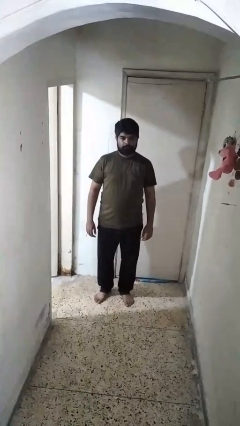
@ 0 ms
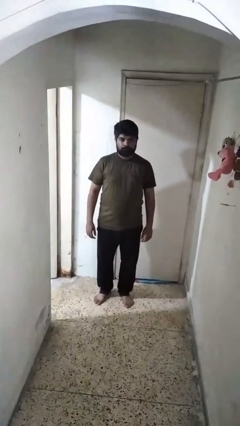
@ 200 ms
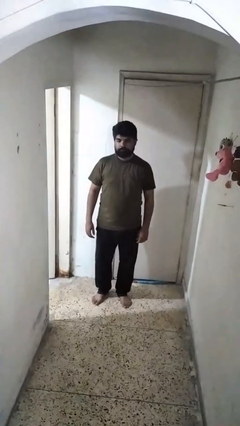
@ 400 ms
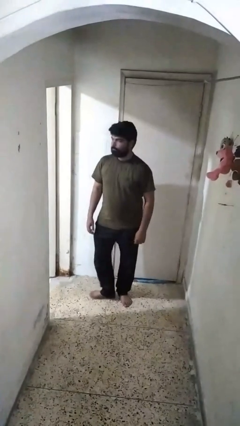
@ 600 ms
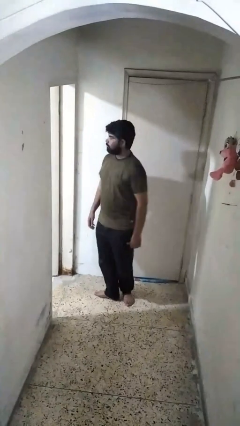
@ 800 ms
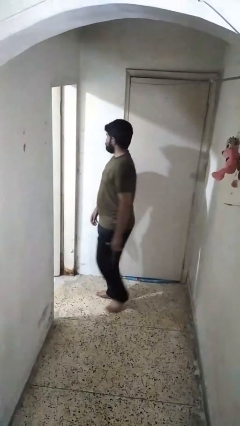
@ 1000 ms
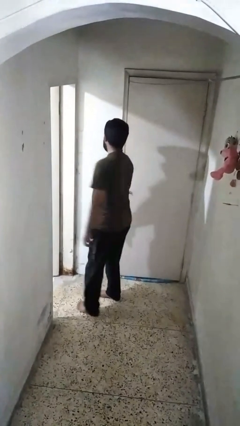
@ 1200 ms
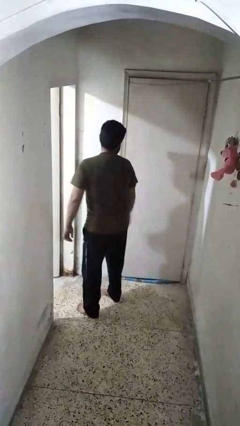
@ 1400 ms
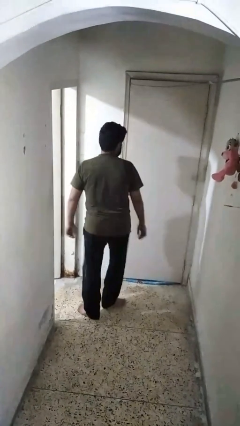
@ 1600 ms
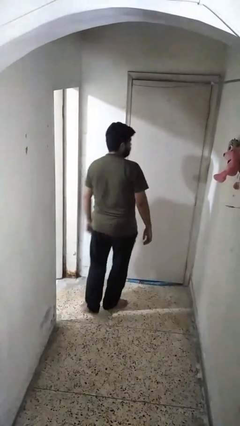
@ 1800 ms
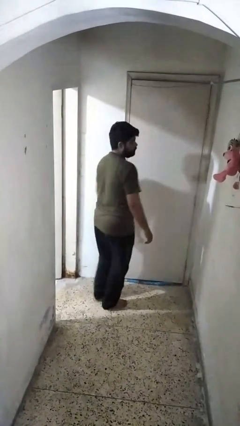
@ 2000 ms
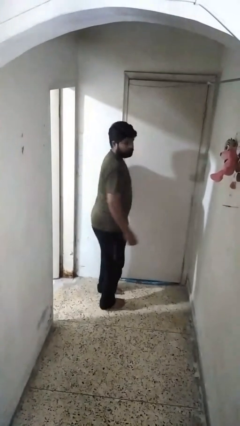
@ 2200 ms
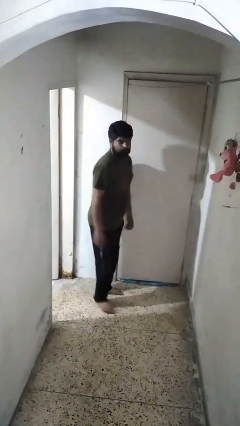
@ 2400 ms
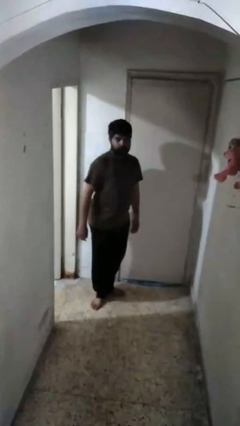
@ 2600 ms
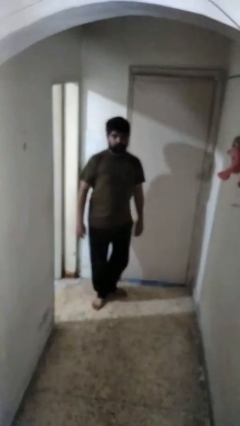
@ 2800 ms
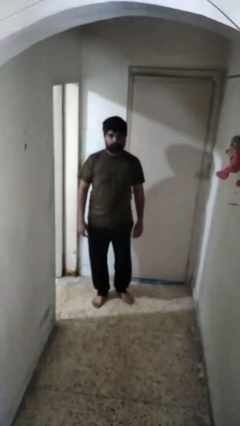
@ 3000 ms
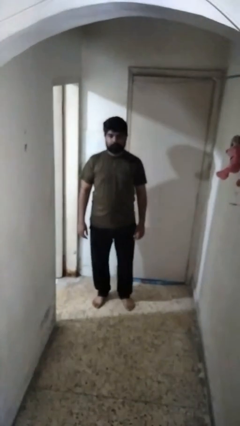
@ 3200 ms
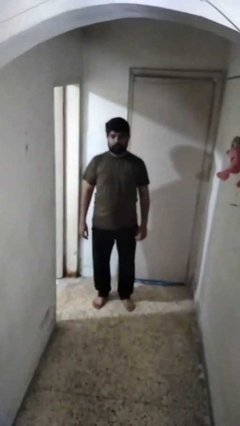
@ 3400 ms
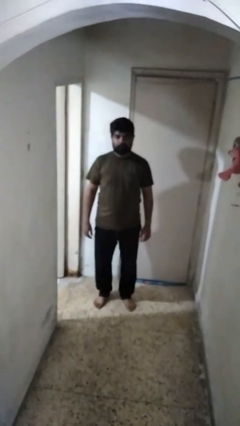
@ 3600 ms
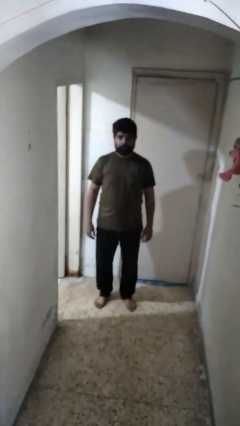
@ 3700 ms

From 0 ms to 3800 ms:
person twirls

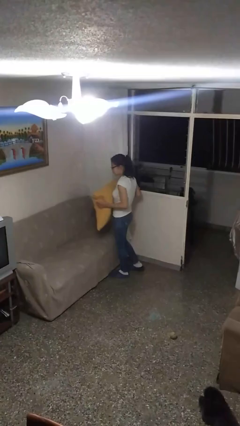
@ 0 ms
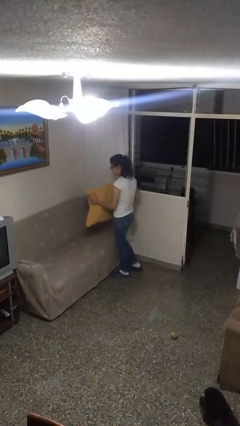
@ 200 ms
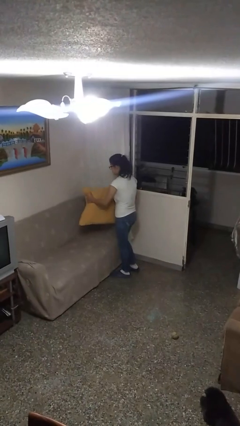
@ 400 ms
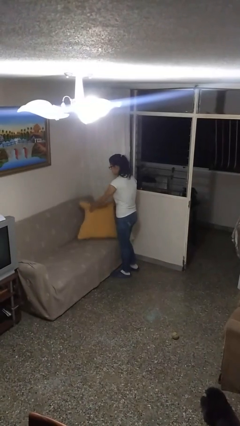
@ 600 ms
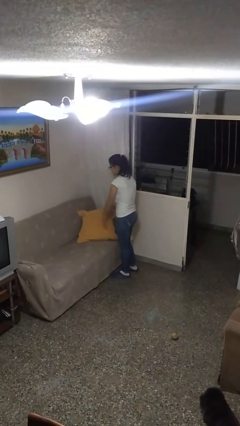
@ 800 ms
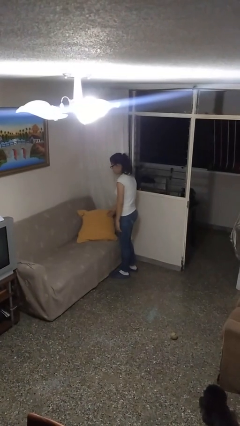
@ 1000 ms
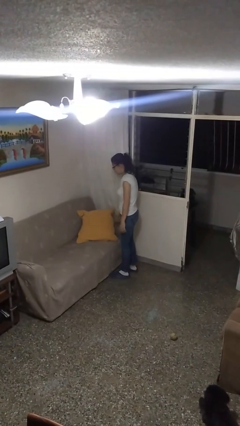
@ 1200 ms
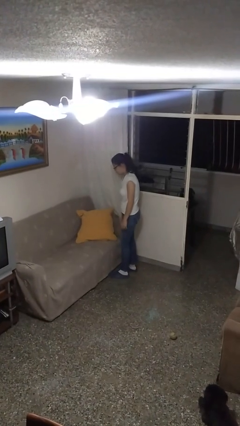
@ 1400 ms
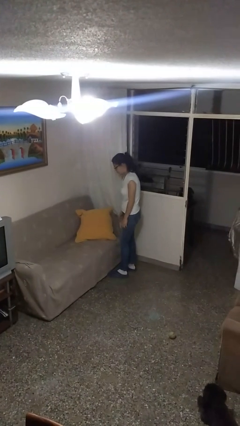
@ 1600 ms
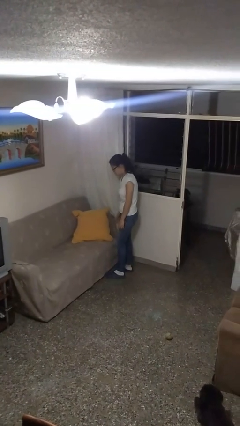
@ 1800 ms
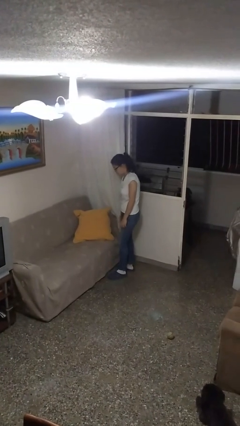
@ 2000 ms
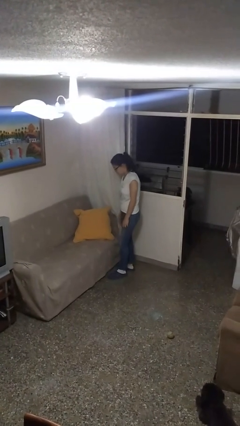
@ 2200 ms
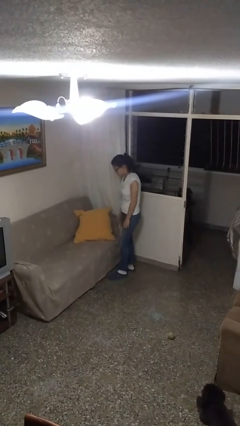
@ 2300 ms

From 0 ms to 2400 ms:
person puts down object on couch

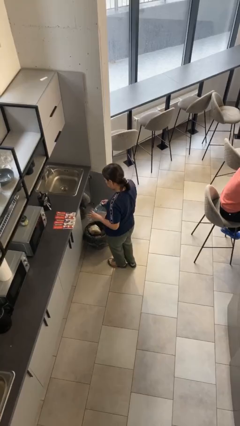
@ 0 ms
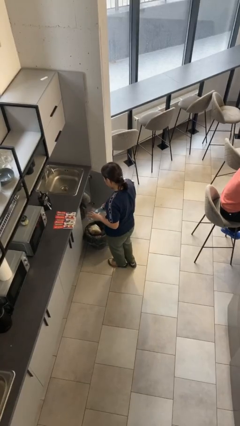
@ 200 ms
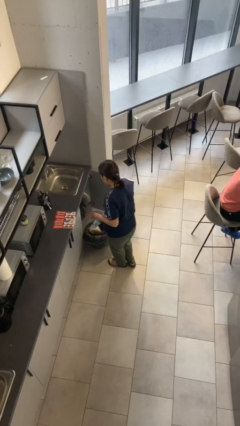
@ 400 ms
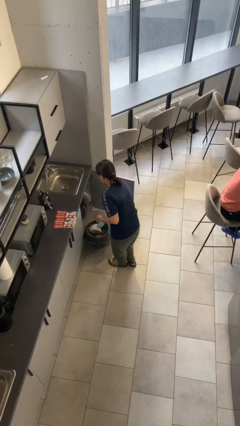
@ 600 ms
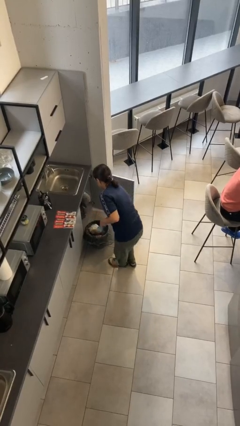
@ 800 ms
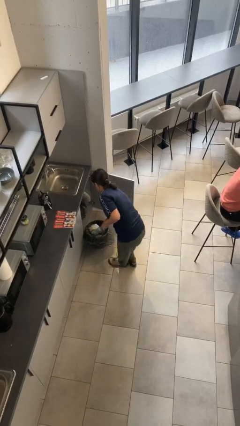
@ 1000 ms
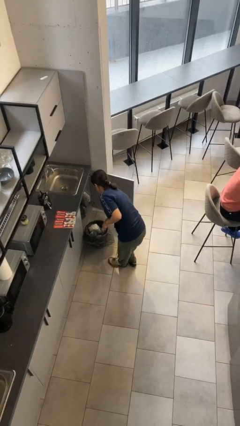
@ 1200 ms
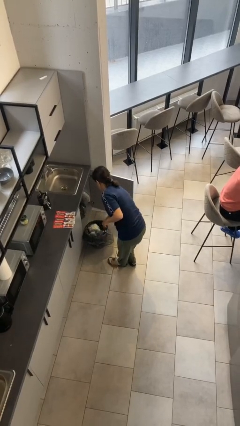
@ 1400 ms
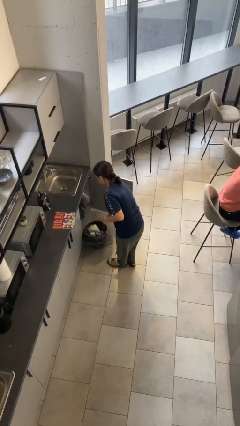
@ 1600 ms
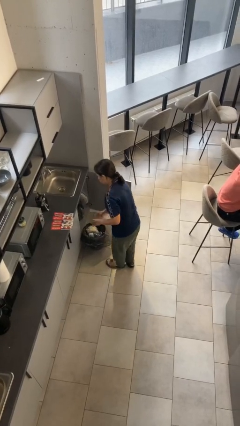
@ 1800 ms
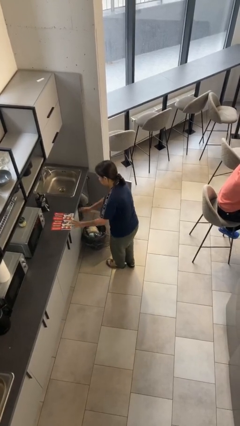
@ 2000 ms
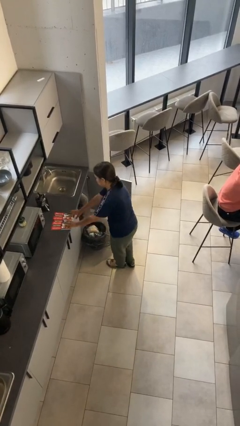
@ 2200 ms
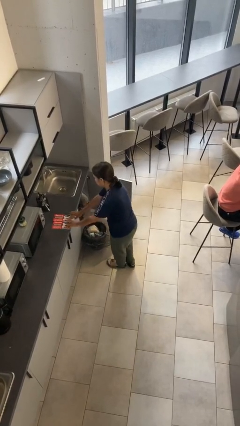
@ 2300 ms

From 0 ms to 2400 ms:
person discards trash

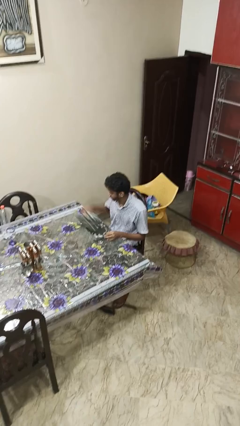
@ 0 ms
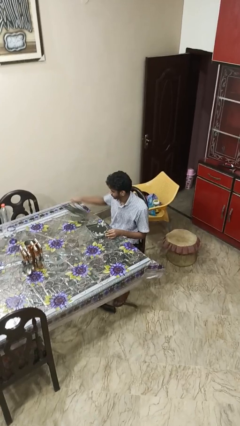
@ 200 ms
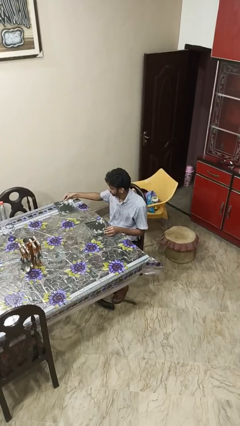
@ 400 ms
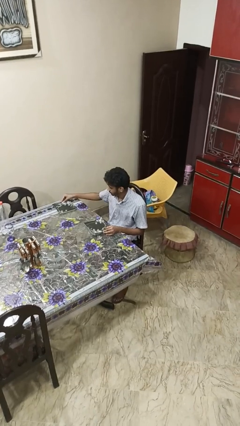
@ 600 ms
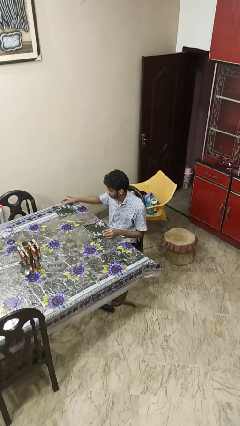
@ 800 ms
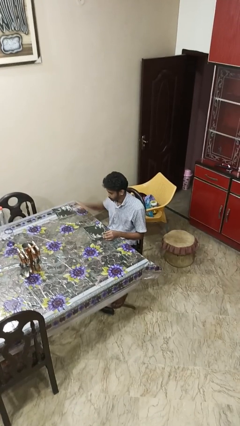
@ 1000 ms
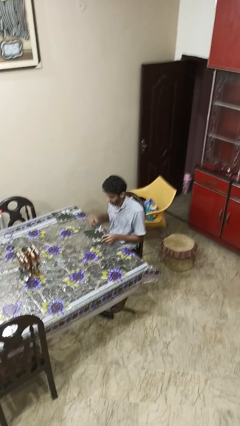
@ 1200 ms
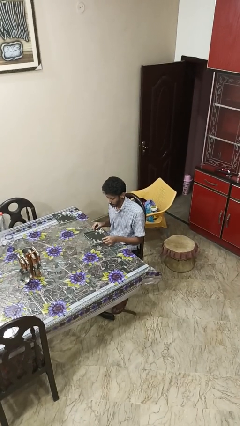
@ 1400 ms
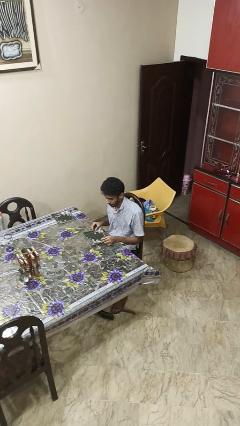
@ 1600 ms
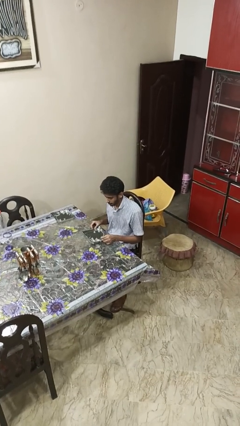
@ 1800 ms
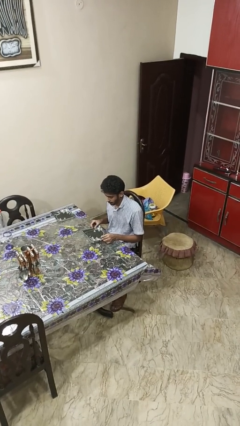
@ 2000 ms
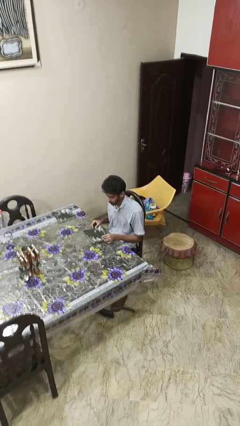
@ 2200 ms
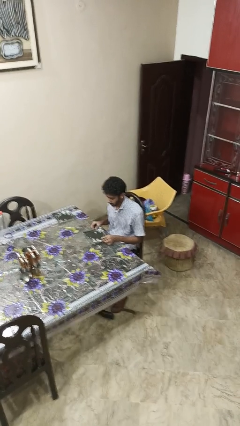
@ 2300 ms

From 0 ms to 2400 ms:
person sets table

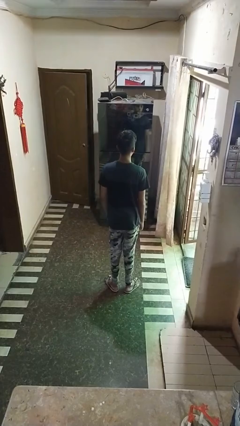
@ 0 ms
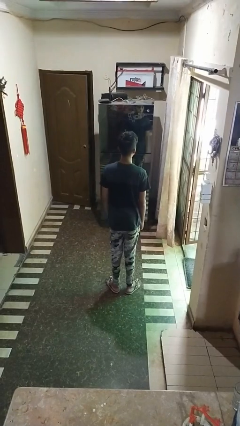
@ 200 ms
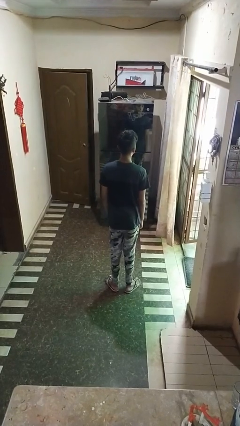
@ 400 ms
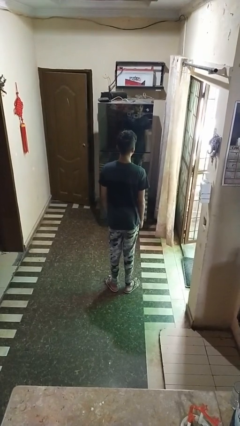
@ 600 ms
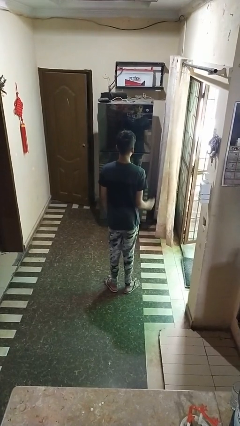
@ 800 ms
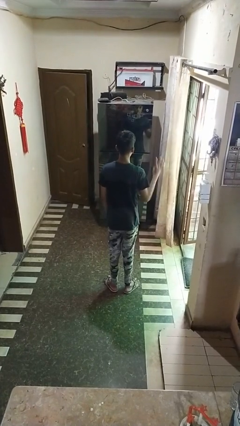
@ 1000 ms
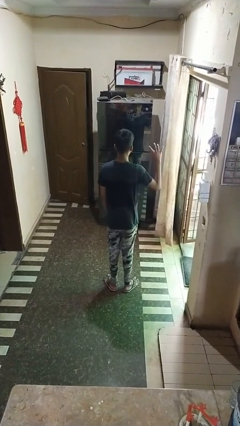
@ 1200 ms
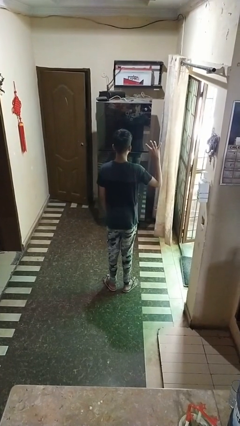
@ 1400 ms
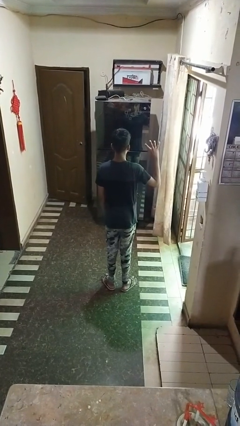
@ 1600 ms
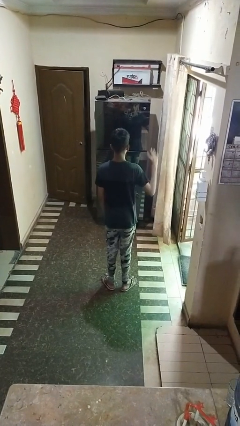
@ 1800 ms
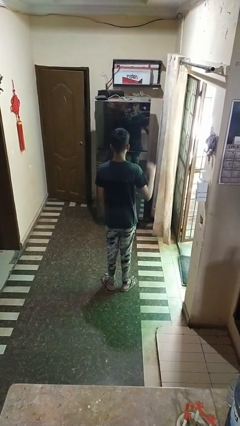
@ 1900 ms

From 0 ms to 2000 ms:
person gestures number four

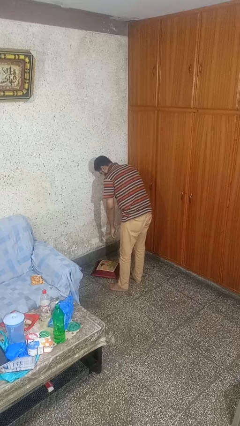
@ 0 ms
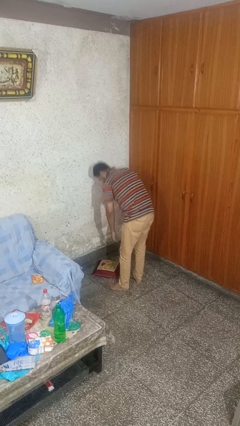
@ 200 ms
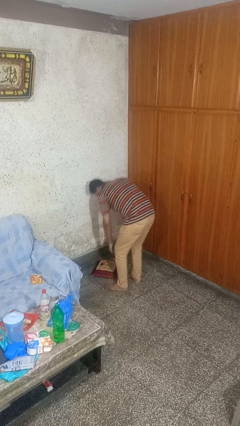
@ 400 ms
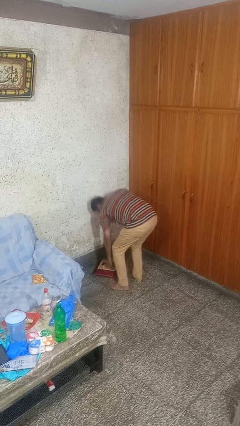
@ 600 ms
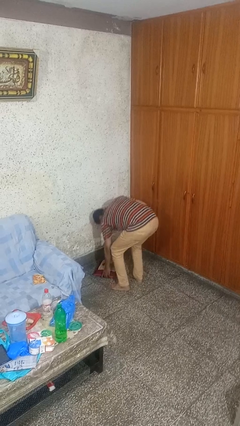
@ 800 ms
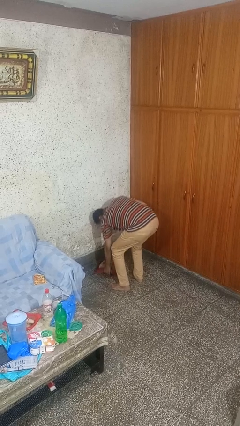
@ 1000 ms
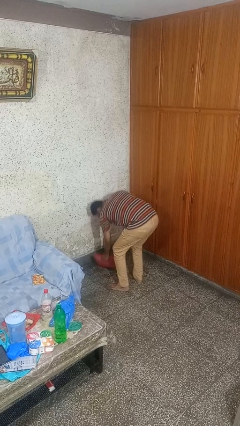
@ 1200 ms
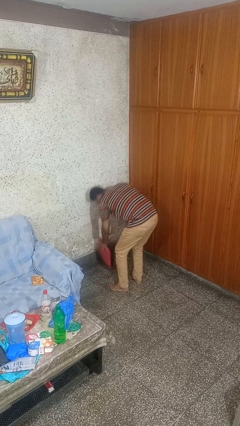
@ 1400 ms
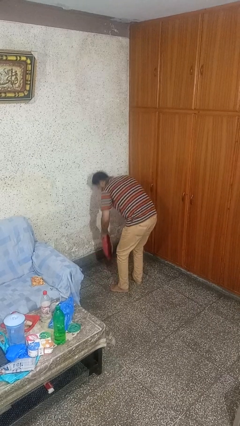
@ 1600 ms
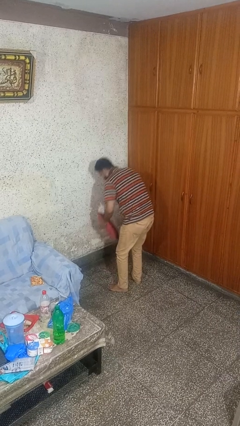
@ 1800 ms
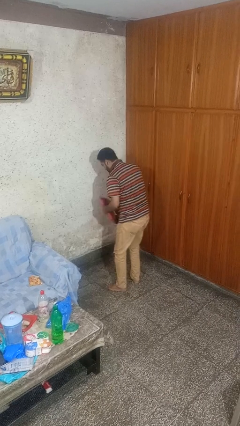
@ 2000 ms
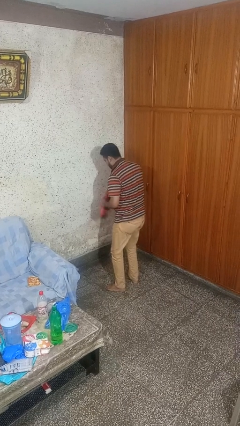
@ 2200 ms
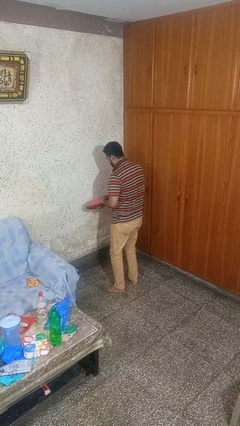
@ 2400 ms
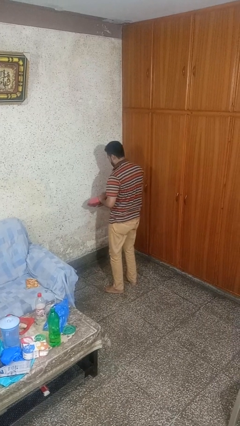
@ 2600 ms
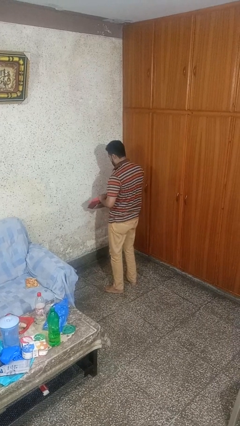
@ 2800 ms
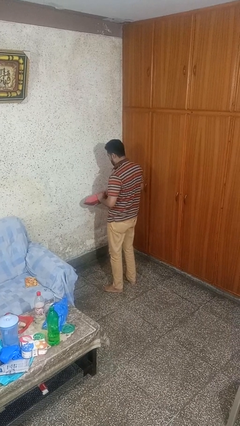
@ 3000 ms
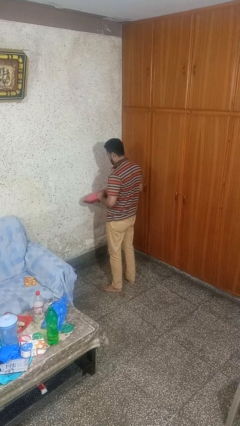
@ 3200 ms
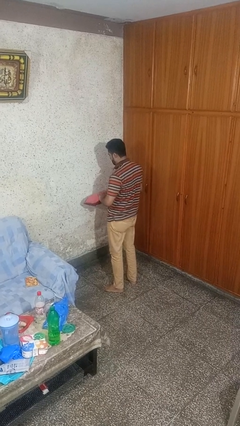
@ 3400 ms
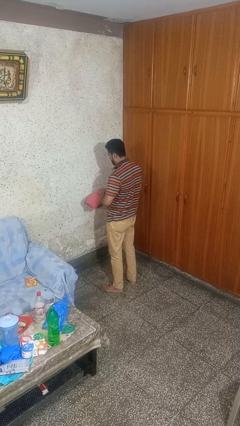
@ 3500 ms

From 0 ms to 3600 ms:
person picks up object from floor

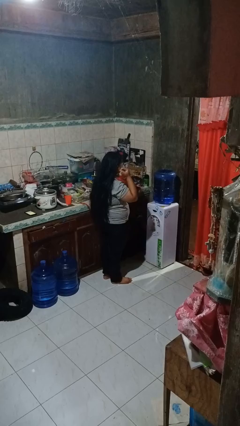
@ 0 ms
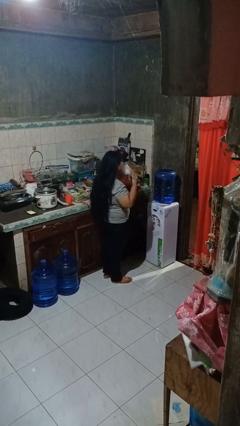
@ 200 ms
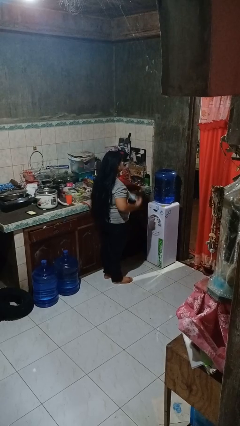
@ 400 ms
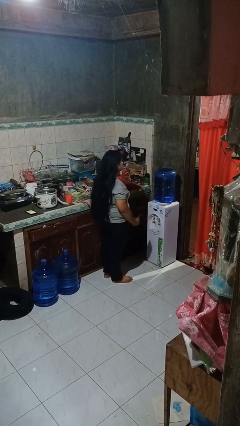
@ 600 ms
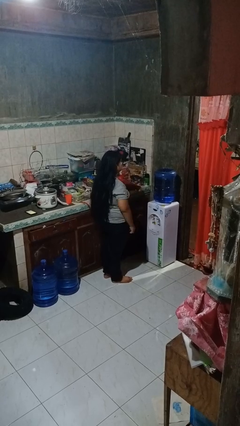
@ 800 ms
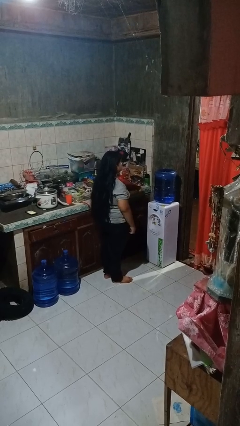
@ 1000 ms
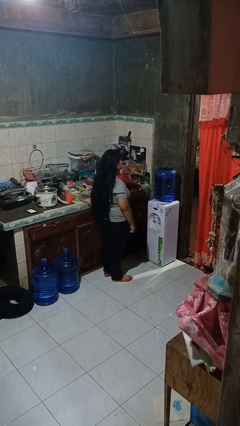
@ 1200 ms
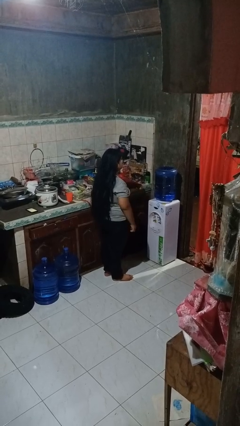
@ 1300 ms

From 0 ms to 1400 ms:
person takes off facemask
